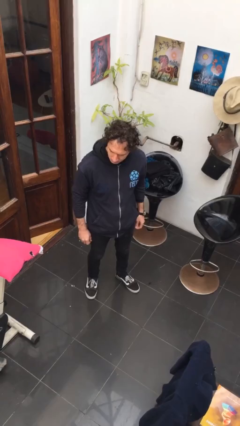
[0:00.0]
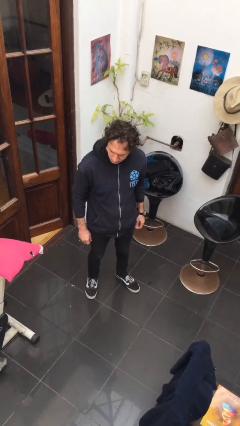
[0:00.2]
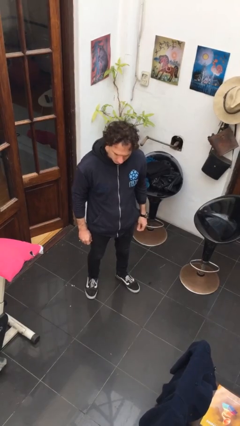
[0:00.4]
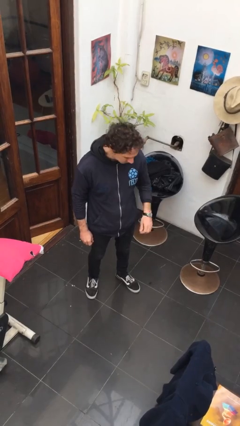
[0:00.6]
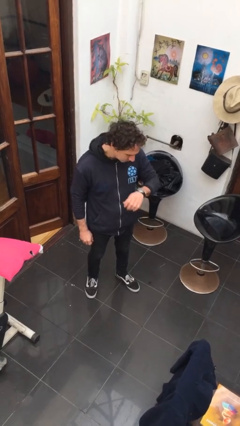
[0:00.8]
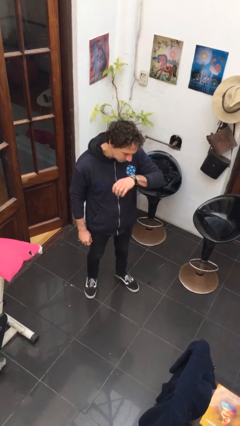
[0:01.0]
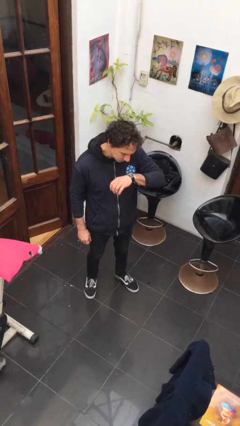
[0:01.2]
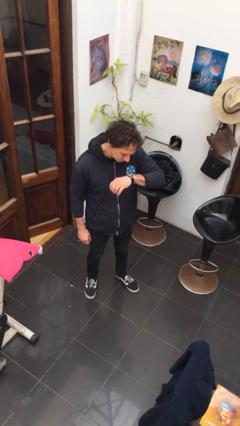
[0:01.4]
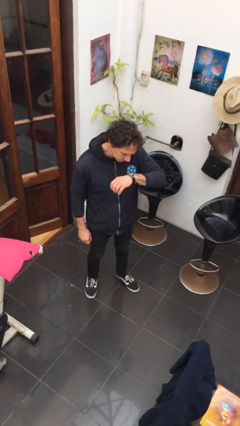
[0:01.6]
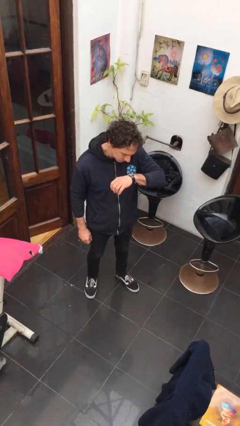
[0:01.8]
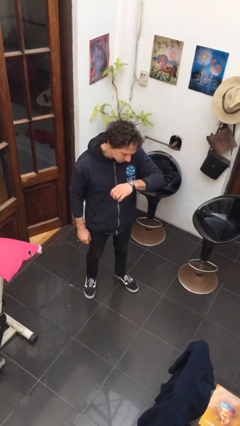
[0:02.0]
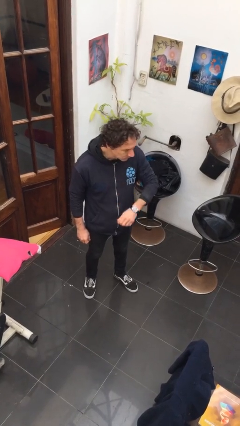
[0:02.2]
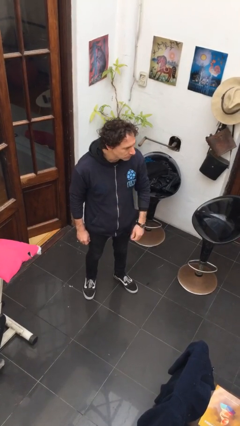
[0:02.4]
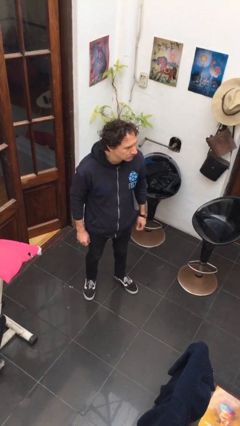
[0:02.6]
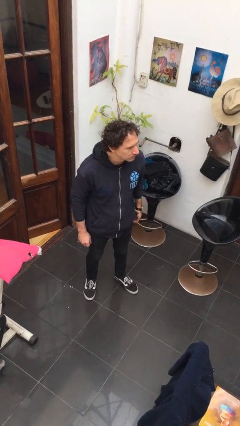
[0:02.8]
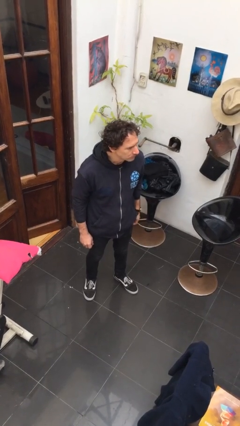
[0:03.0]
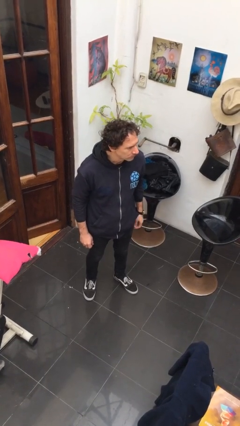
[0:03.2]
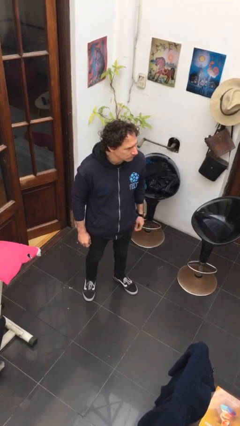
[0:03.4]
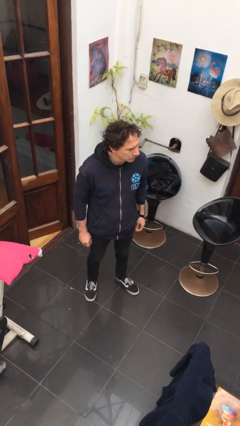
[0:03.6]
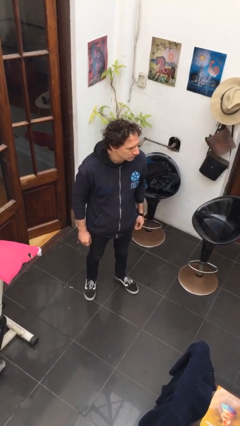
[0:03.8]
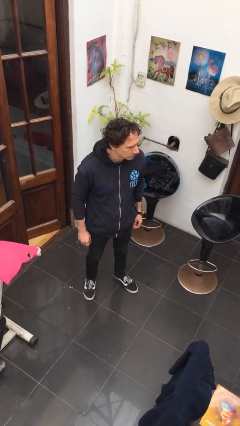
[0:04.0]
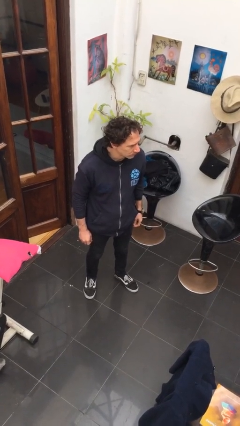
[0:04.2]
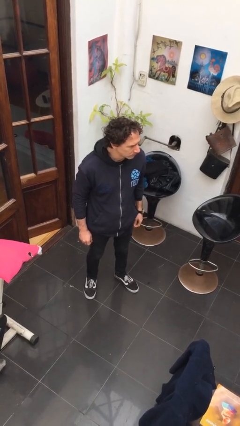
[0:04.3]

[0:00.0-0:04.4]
person looks at wristwatch

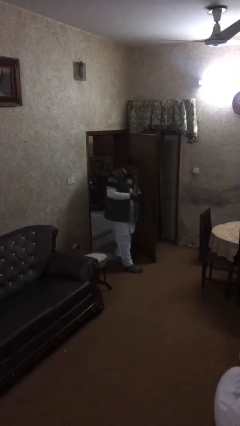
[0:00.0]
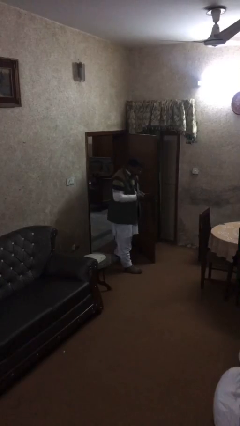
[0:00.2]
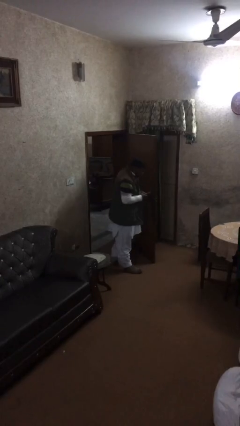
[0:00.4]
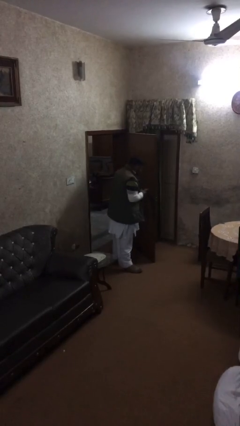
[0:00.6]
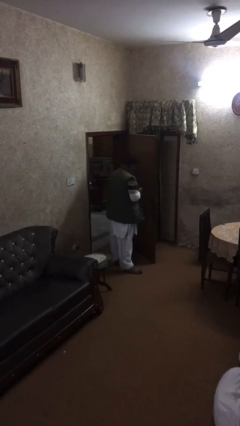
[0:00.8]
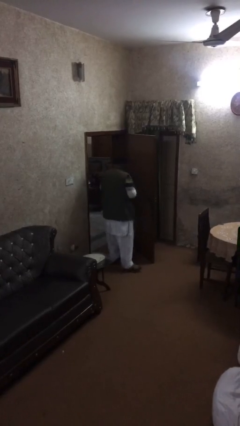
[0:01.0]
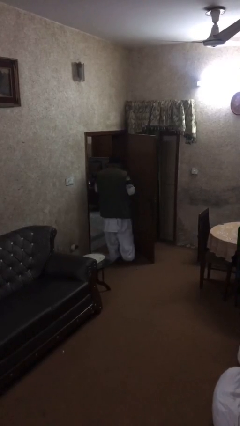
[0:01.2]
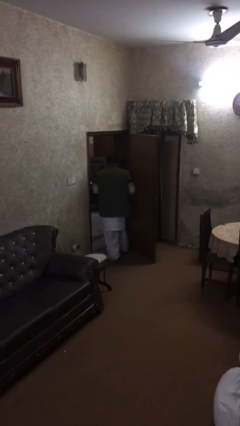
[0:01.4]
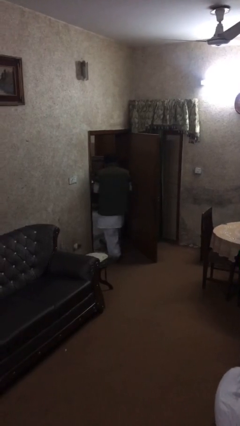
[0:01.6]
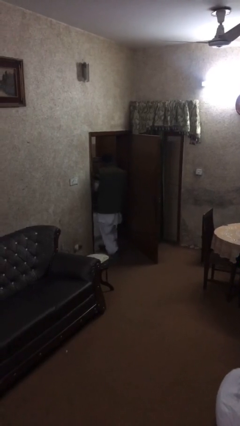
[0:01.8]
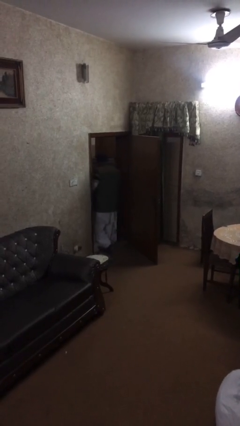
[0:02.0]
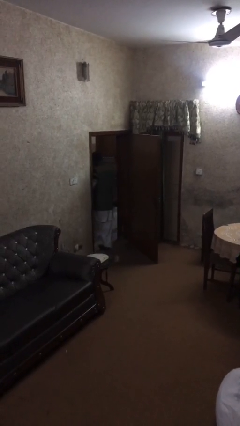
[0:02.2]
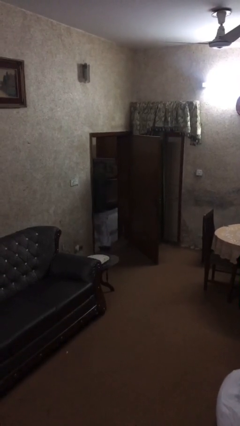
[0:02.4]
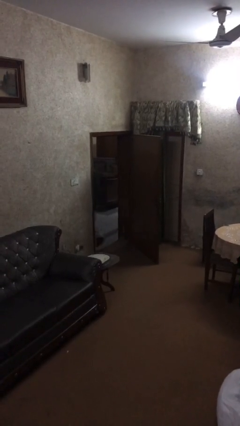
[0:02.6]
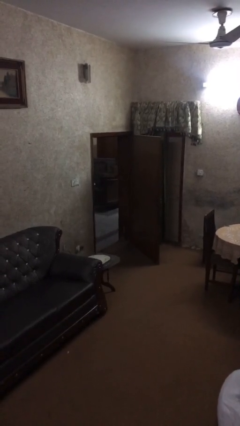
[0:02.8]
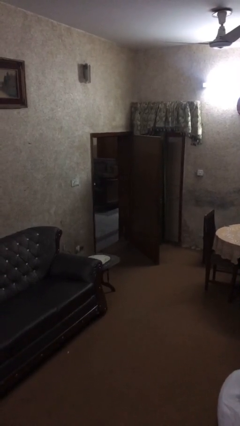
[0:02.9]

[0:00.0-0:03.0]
person exits scene through structure

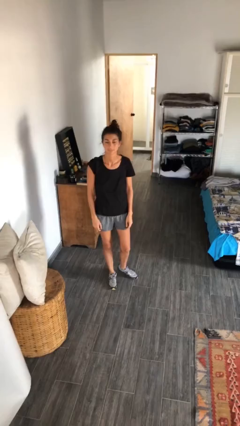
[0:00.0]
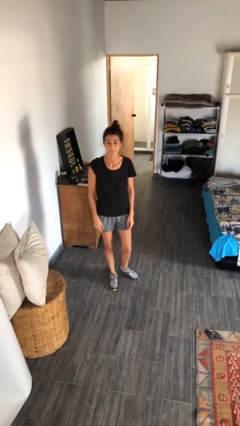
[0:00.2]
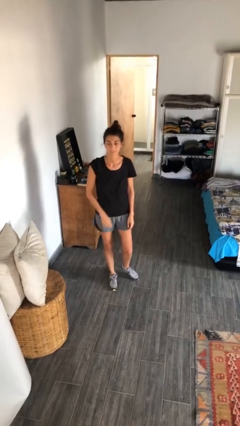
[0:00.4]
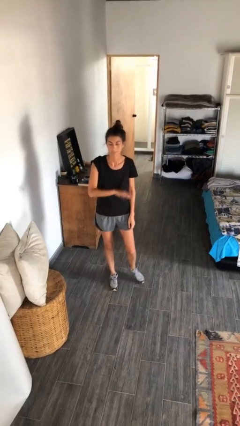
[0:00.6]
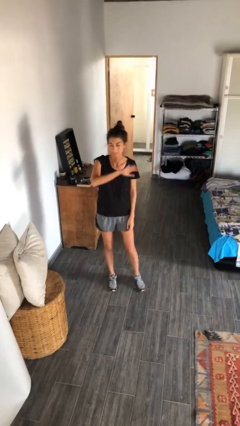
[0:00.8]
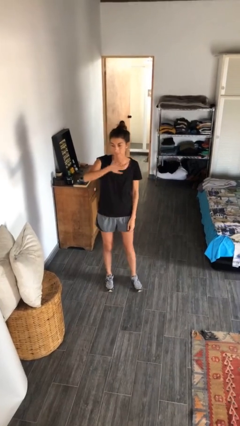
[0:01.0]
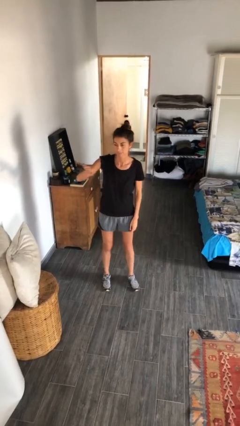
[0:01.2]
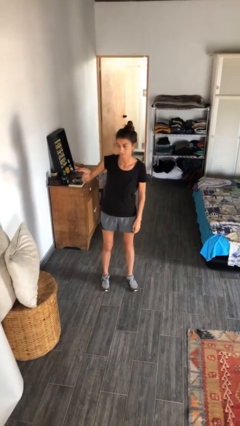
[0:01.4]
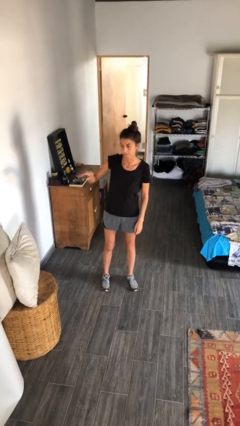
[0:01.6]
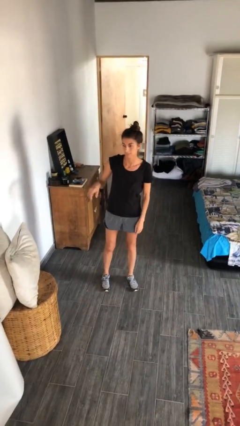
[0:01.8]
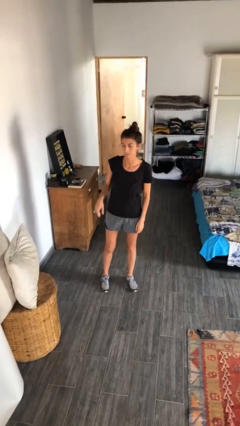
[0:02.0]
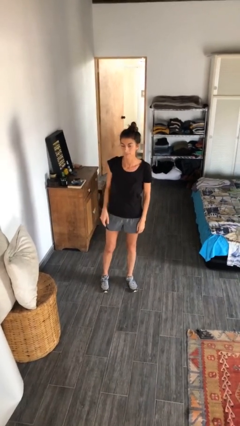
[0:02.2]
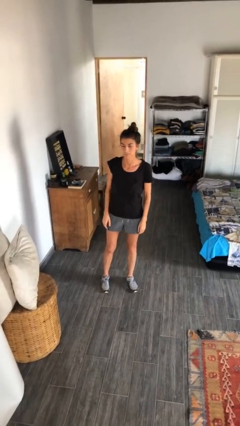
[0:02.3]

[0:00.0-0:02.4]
person gestures swipe right

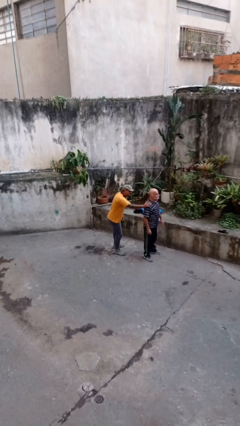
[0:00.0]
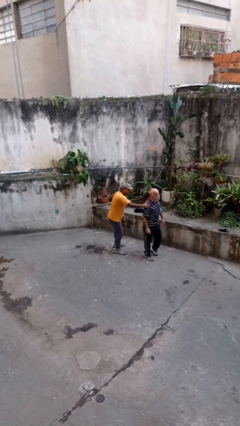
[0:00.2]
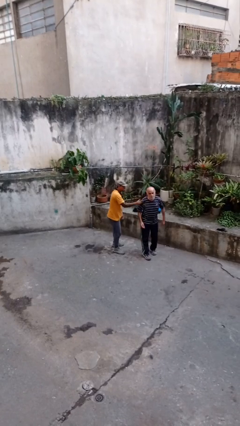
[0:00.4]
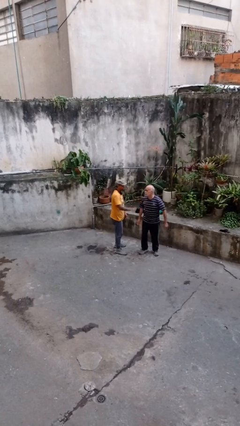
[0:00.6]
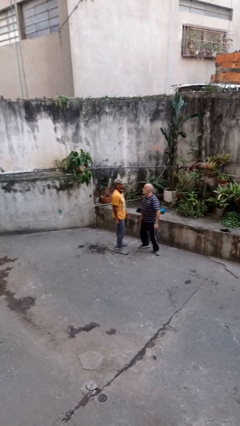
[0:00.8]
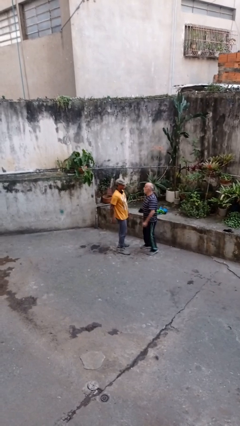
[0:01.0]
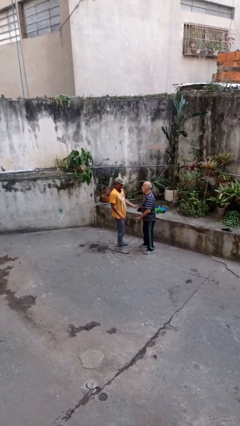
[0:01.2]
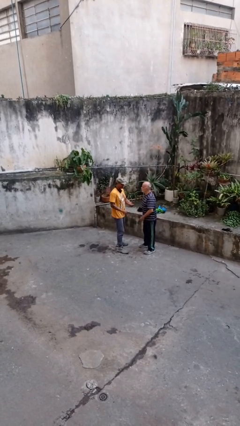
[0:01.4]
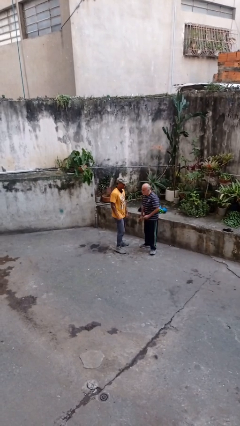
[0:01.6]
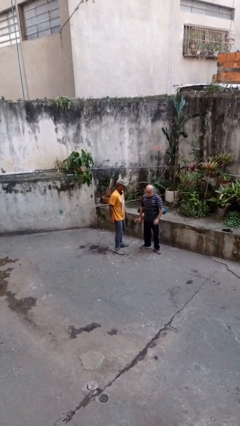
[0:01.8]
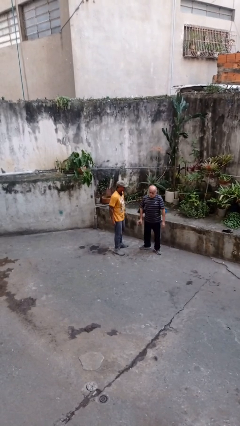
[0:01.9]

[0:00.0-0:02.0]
person spins person around

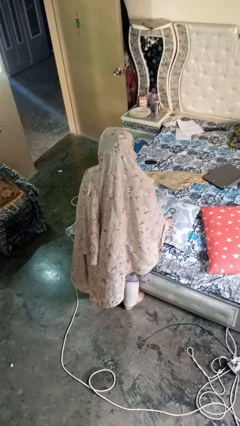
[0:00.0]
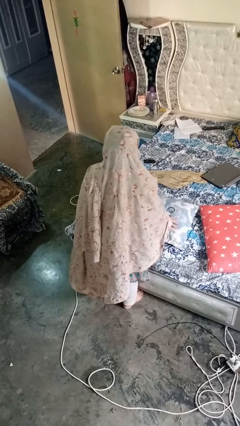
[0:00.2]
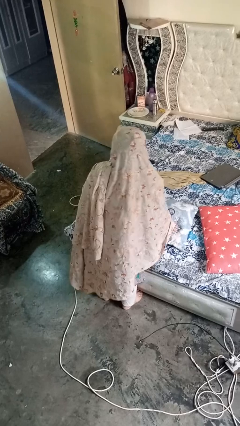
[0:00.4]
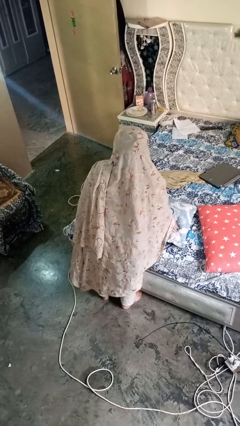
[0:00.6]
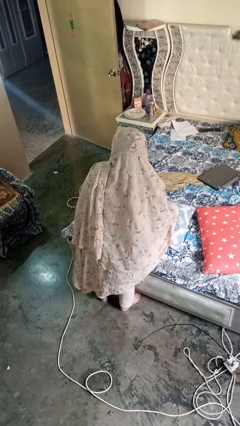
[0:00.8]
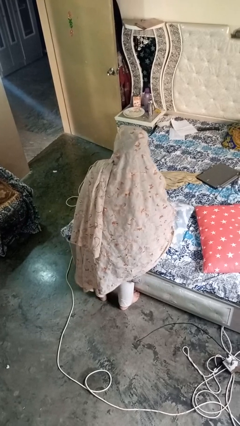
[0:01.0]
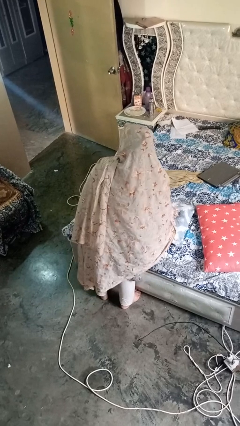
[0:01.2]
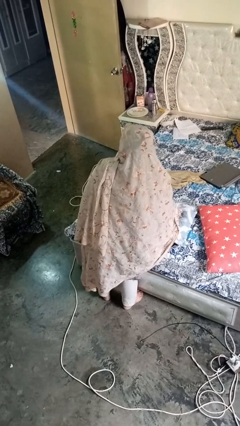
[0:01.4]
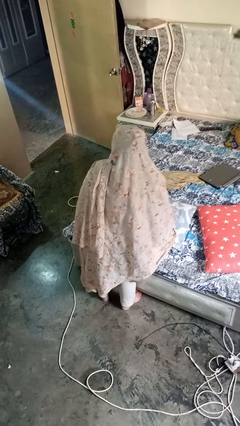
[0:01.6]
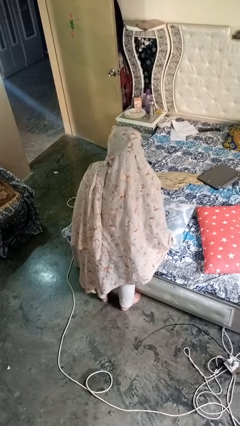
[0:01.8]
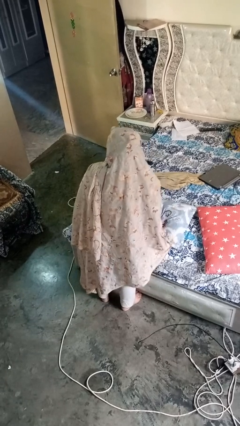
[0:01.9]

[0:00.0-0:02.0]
person taps object with finger

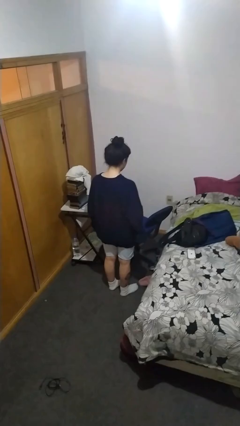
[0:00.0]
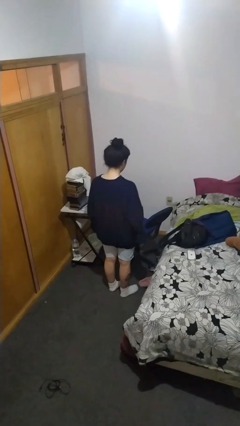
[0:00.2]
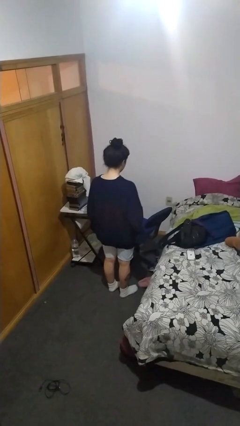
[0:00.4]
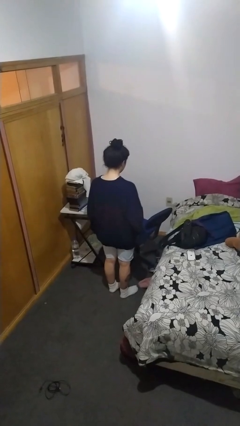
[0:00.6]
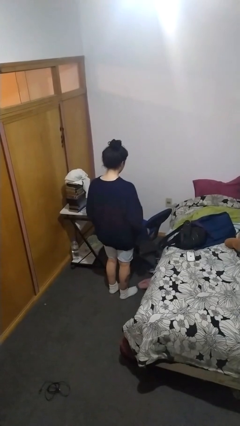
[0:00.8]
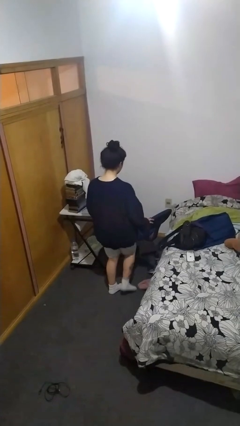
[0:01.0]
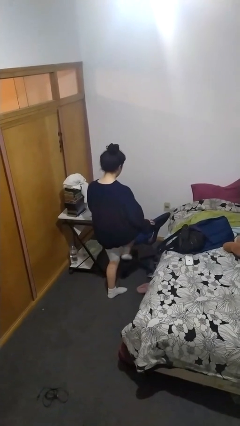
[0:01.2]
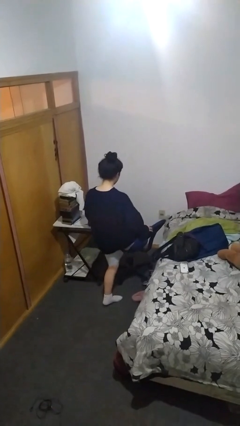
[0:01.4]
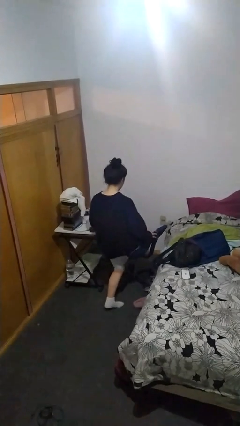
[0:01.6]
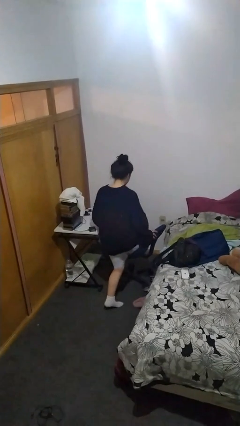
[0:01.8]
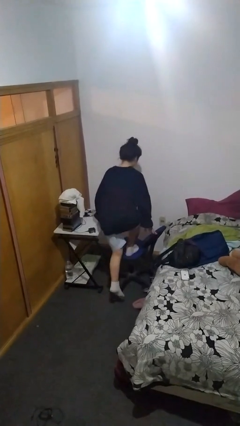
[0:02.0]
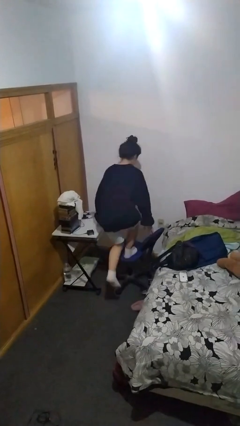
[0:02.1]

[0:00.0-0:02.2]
person climbs on chair

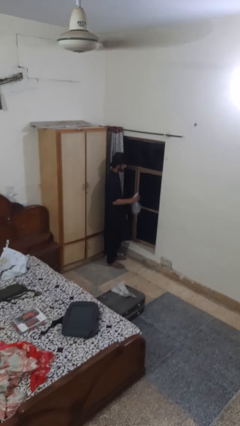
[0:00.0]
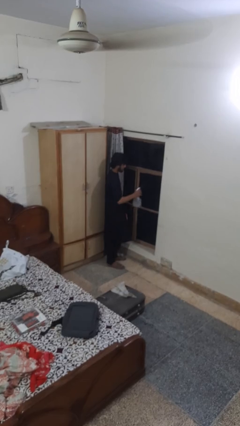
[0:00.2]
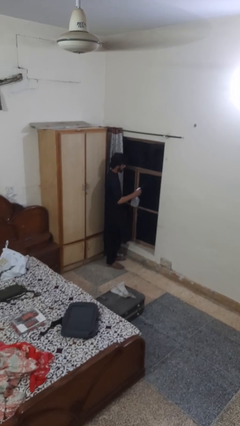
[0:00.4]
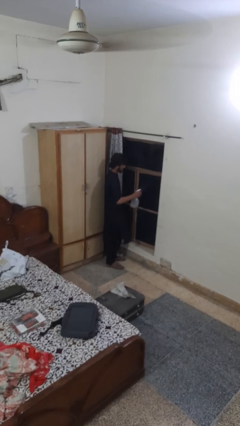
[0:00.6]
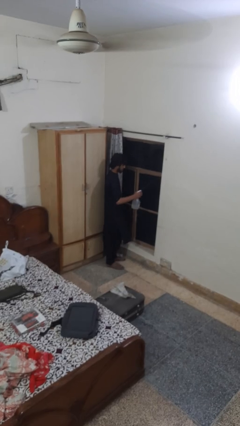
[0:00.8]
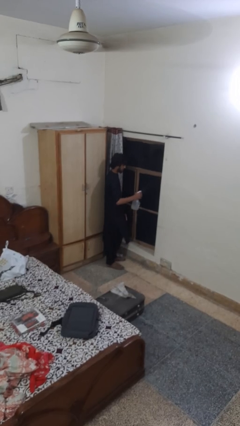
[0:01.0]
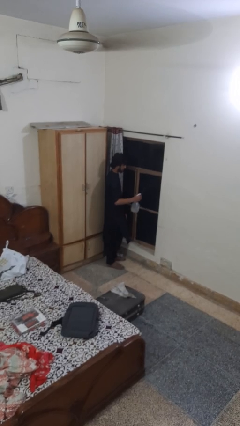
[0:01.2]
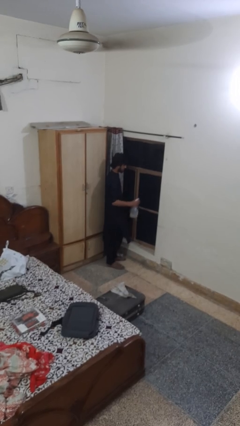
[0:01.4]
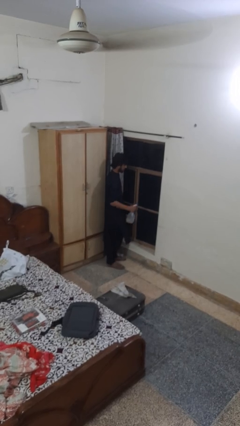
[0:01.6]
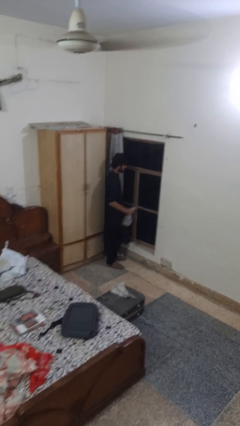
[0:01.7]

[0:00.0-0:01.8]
person sprays from bottle
